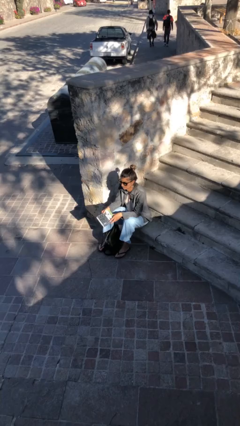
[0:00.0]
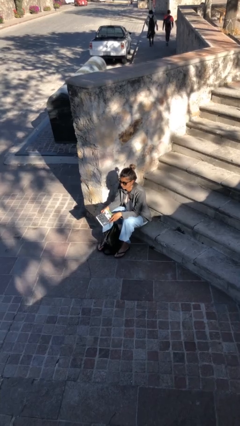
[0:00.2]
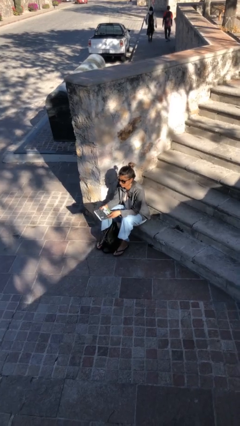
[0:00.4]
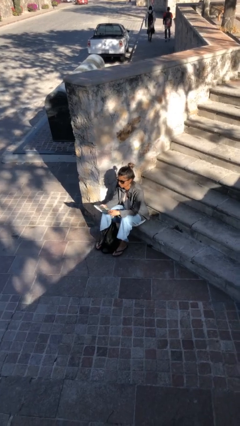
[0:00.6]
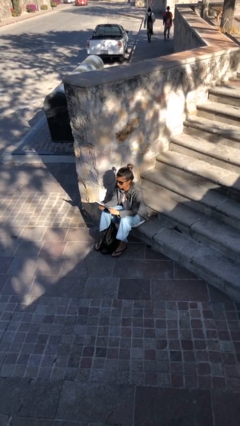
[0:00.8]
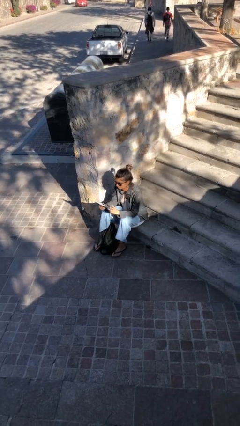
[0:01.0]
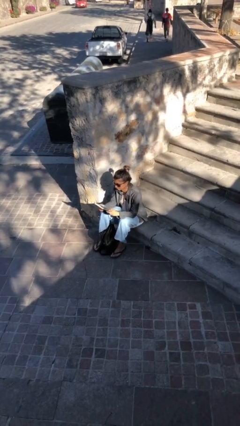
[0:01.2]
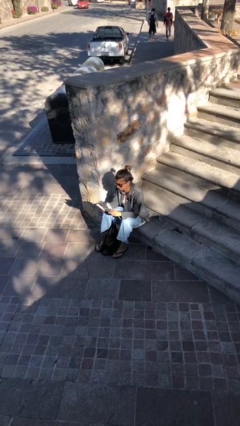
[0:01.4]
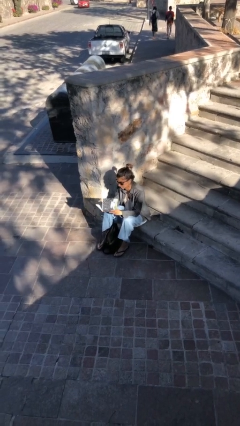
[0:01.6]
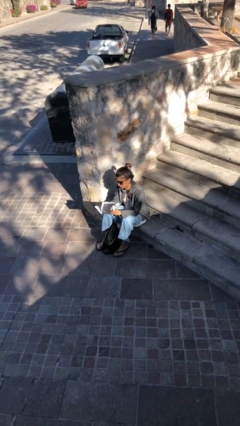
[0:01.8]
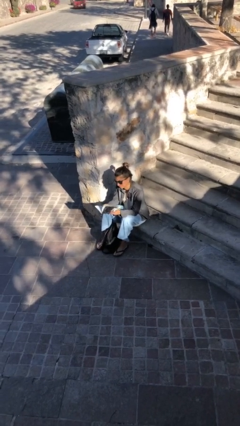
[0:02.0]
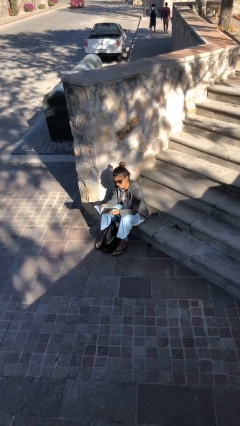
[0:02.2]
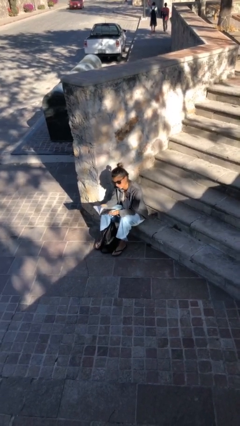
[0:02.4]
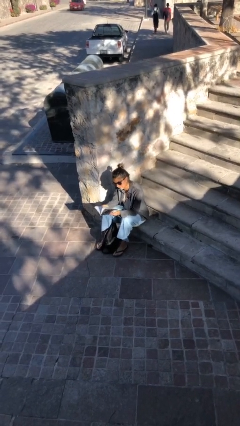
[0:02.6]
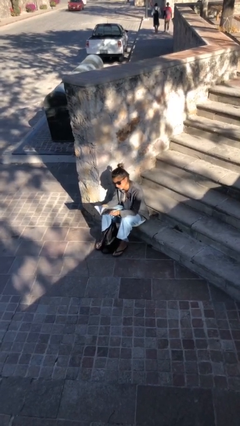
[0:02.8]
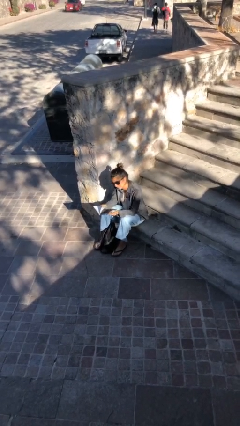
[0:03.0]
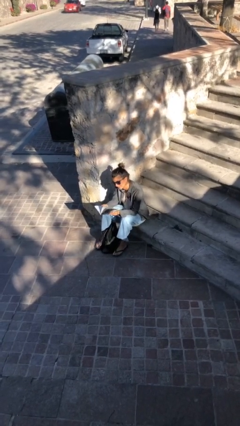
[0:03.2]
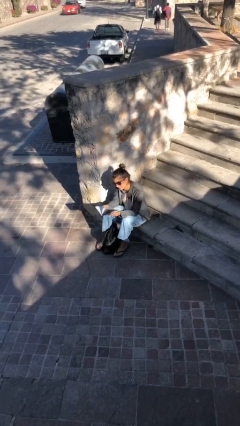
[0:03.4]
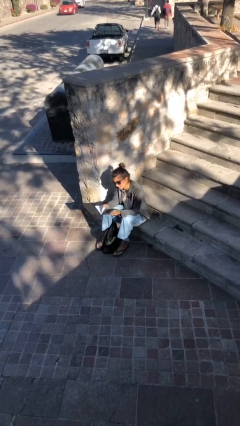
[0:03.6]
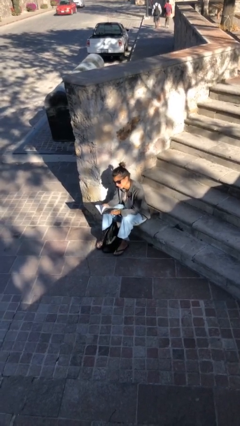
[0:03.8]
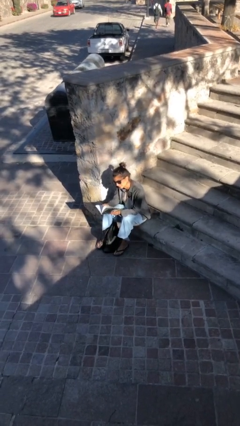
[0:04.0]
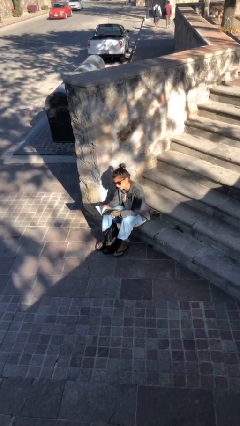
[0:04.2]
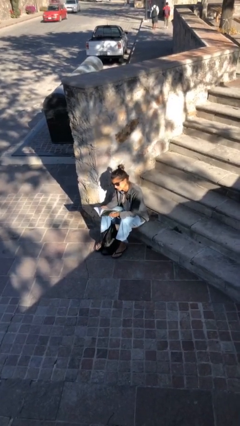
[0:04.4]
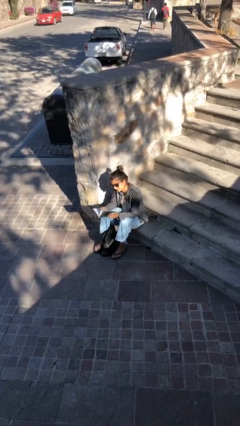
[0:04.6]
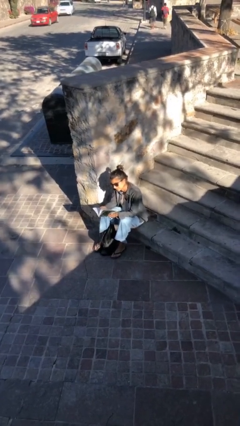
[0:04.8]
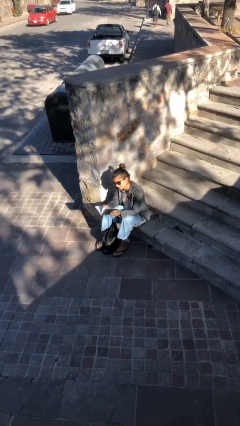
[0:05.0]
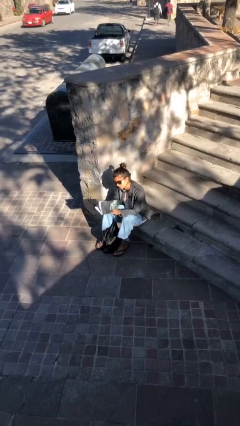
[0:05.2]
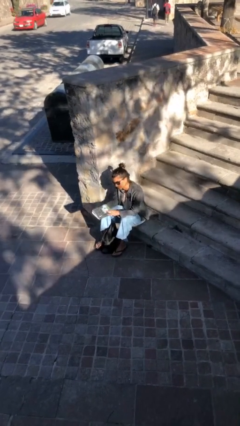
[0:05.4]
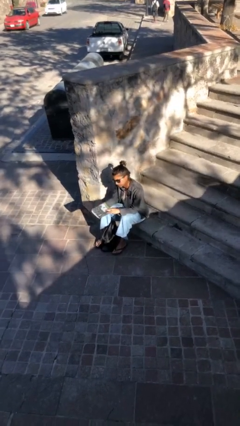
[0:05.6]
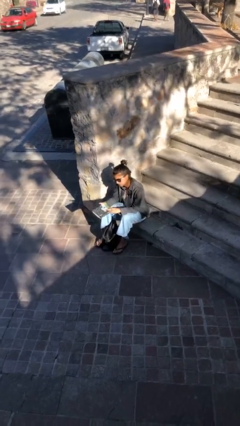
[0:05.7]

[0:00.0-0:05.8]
person reads document

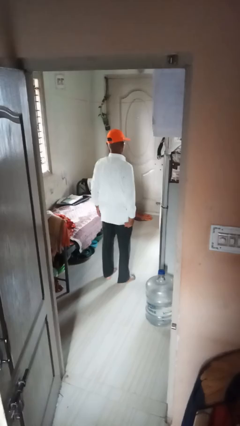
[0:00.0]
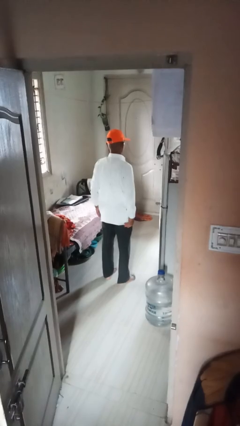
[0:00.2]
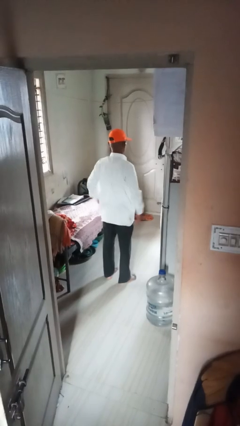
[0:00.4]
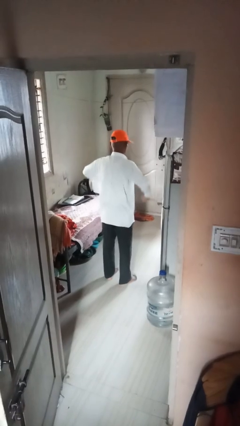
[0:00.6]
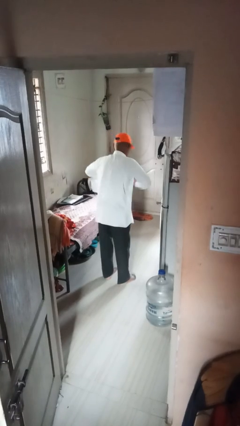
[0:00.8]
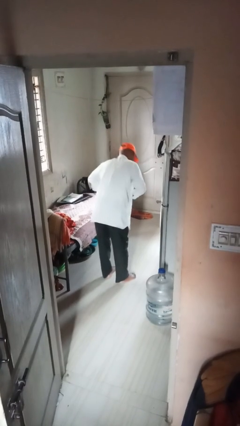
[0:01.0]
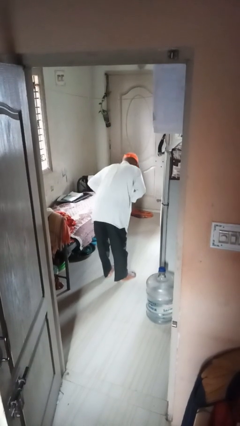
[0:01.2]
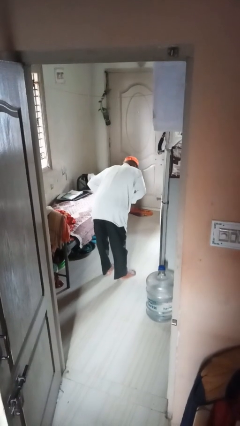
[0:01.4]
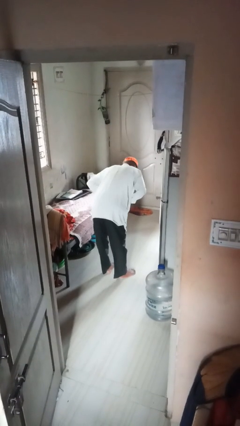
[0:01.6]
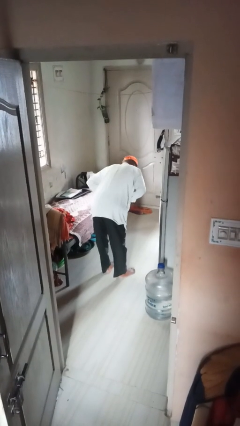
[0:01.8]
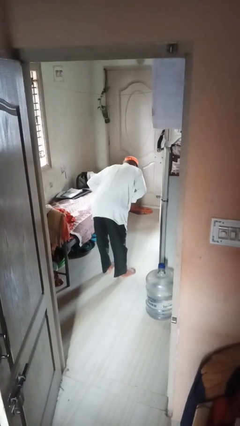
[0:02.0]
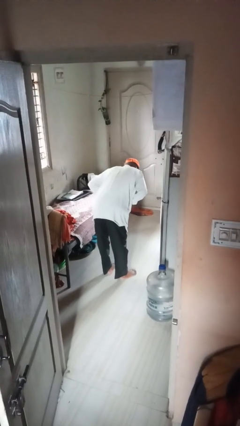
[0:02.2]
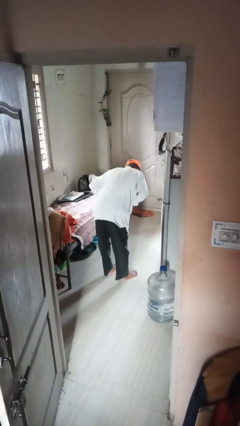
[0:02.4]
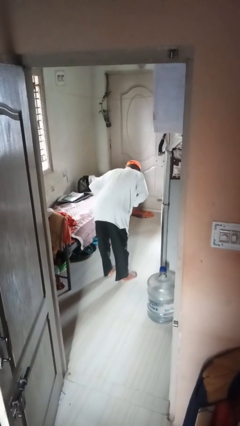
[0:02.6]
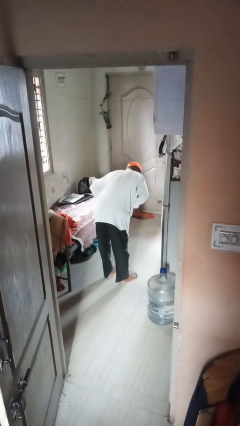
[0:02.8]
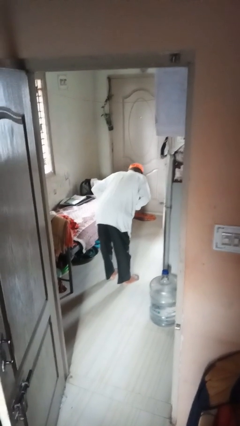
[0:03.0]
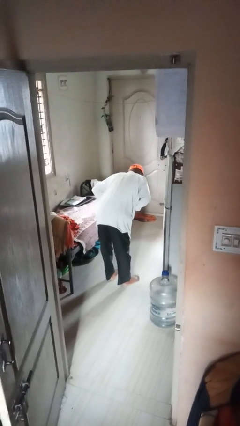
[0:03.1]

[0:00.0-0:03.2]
person bows

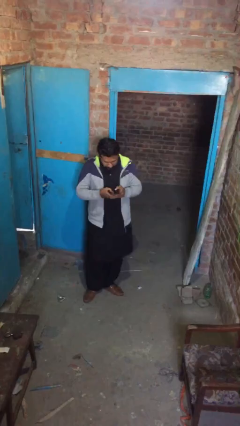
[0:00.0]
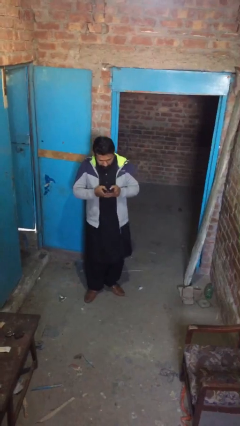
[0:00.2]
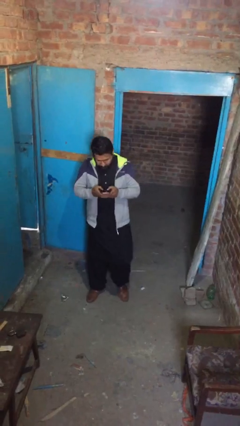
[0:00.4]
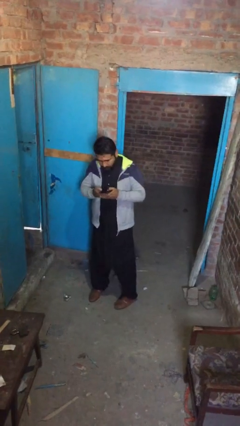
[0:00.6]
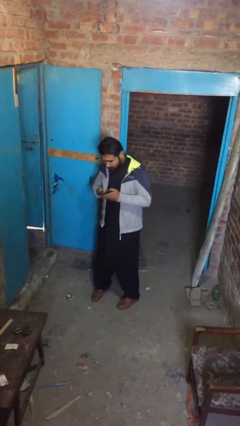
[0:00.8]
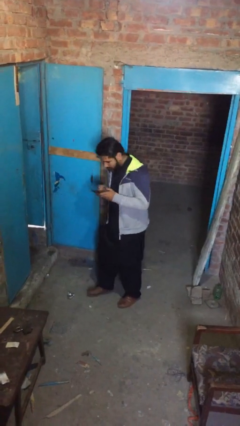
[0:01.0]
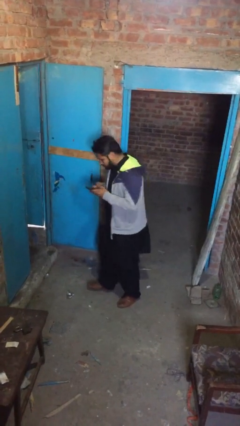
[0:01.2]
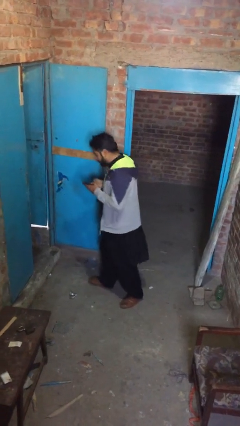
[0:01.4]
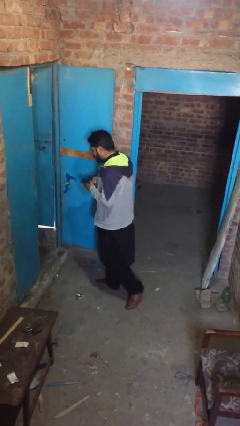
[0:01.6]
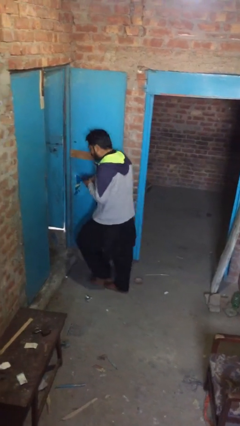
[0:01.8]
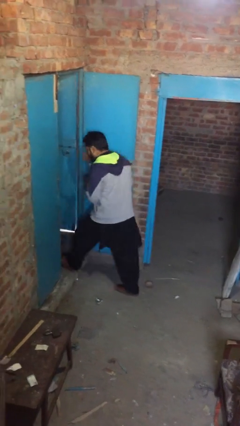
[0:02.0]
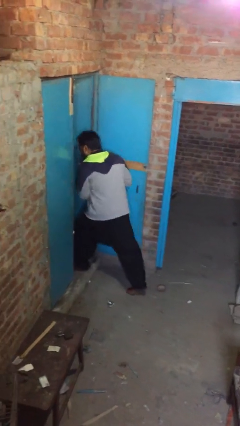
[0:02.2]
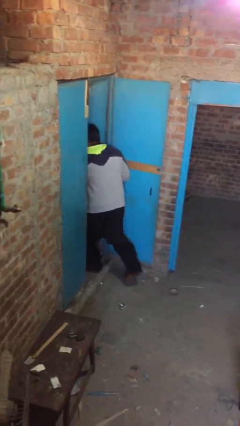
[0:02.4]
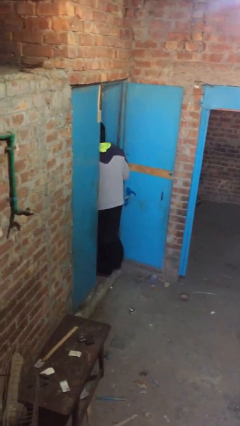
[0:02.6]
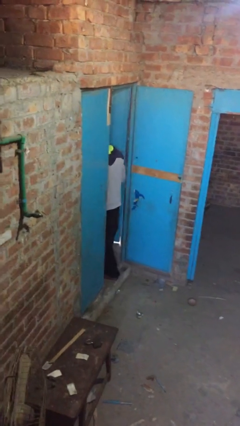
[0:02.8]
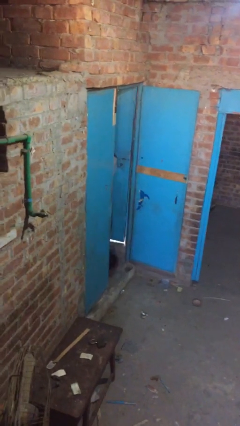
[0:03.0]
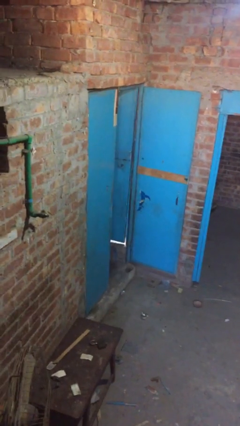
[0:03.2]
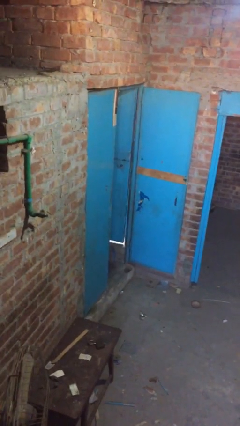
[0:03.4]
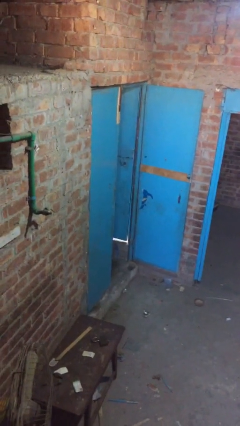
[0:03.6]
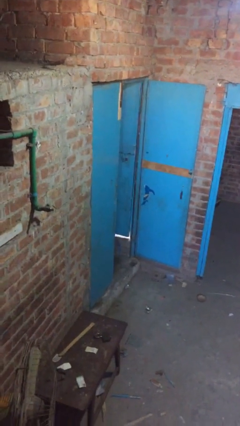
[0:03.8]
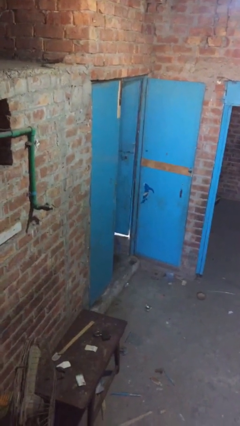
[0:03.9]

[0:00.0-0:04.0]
person exits scene through structure

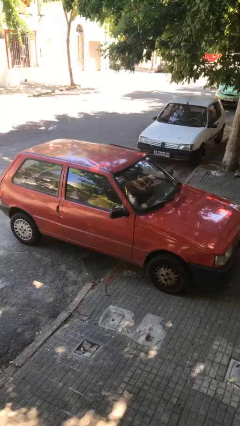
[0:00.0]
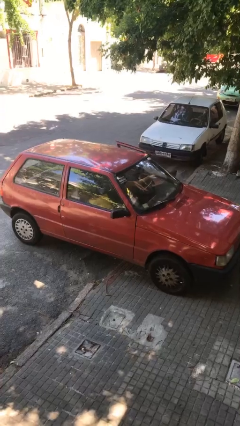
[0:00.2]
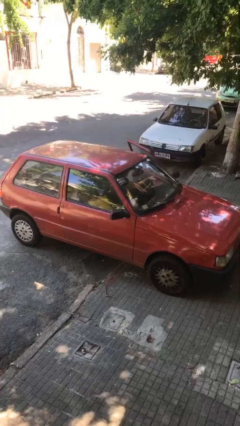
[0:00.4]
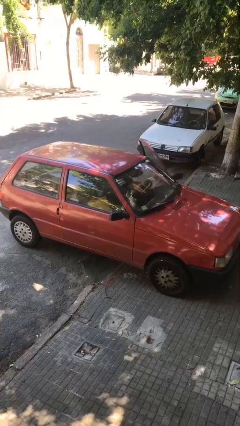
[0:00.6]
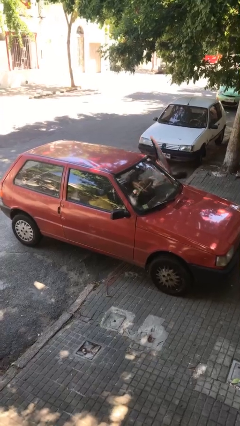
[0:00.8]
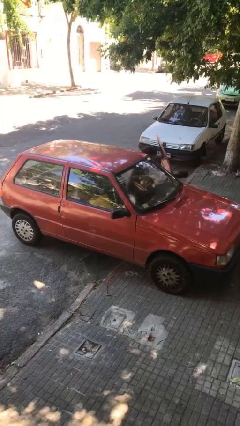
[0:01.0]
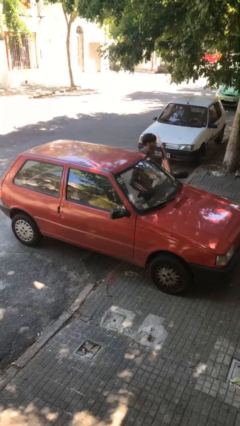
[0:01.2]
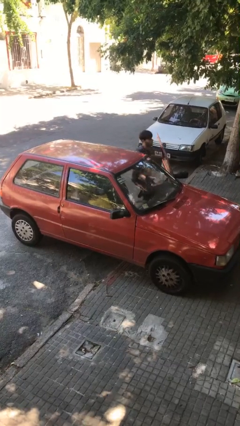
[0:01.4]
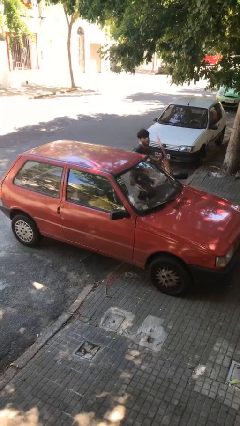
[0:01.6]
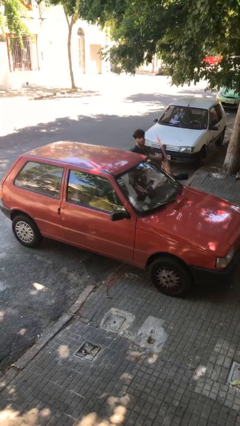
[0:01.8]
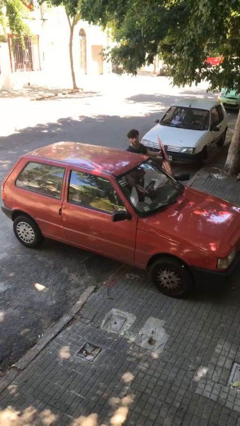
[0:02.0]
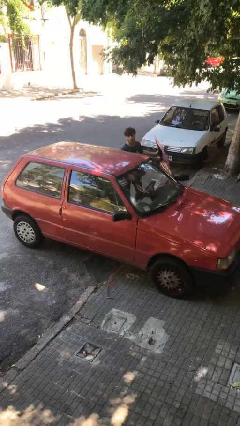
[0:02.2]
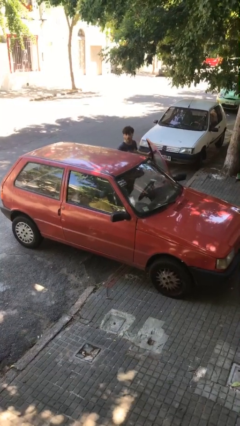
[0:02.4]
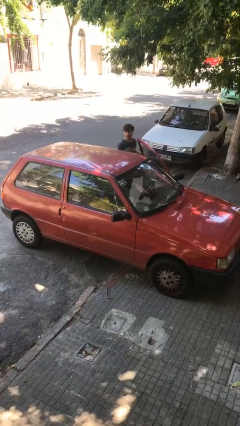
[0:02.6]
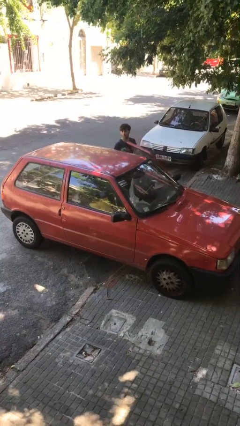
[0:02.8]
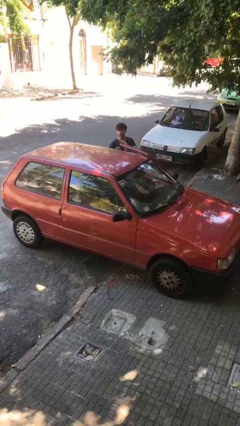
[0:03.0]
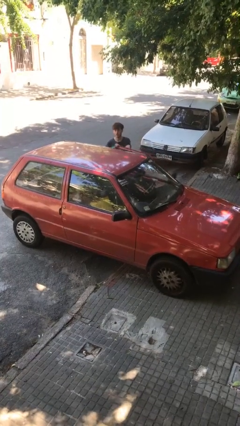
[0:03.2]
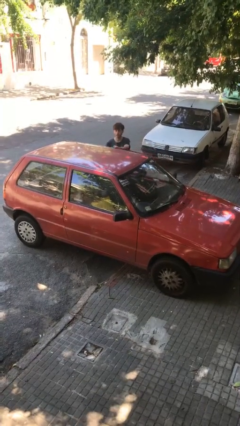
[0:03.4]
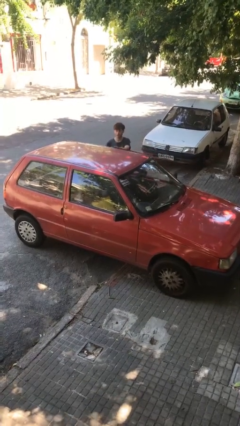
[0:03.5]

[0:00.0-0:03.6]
car drops off person

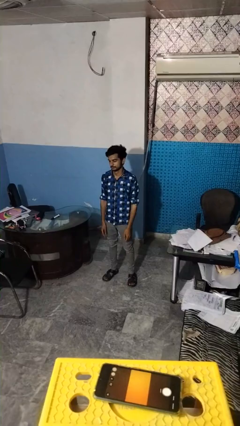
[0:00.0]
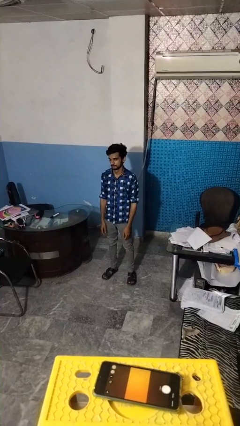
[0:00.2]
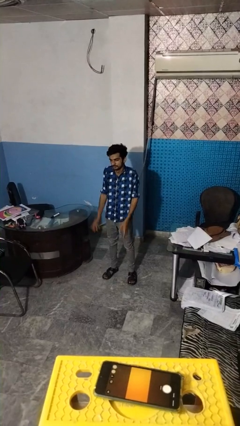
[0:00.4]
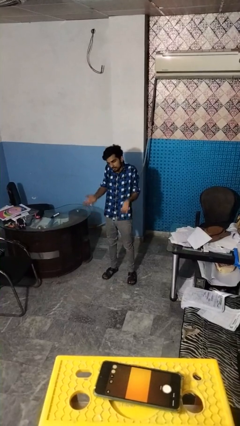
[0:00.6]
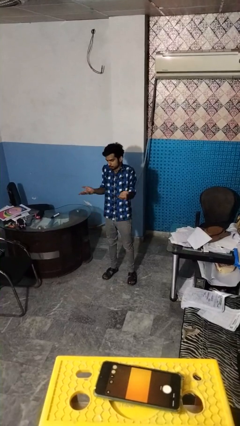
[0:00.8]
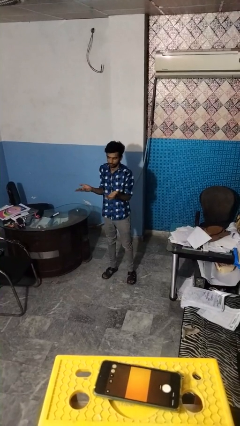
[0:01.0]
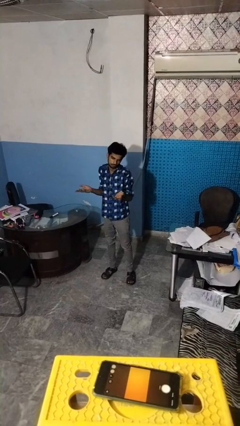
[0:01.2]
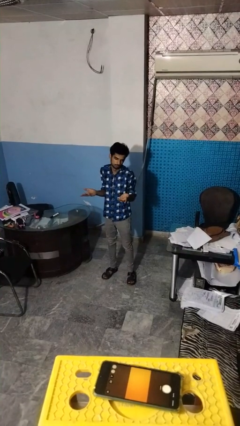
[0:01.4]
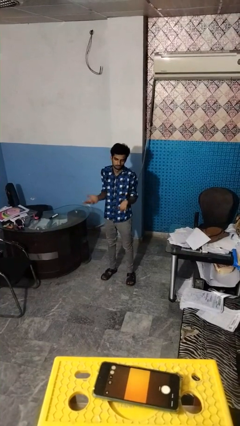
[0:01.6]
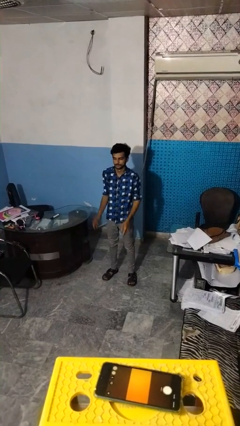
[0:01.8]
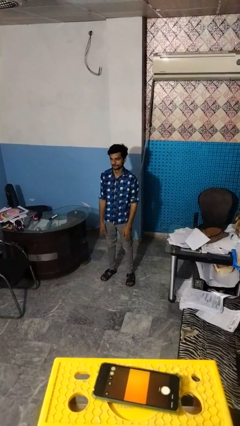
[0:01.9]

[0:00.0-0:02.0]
person shrugs
